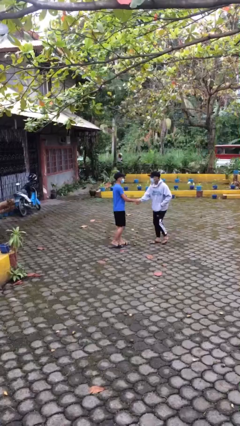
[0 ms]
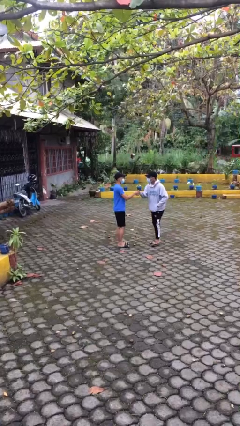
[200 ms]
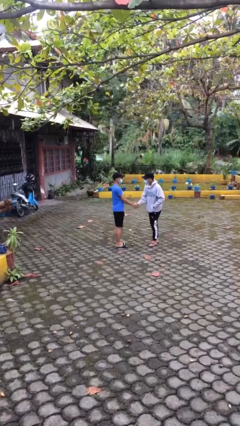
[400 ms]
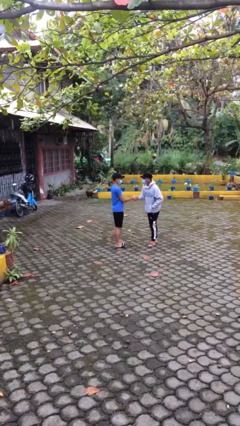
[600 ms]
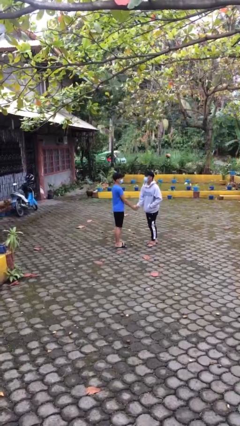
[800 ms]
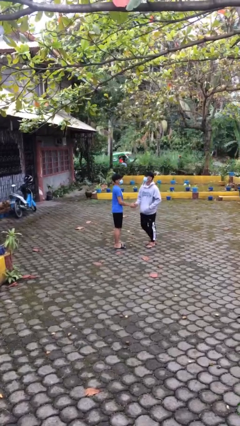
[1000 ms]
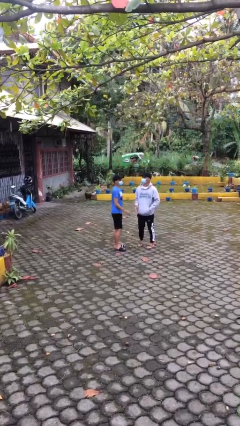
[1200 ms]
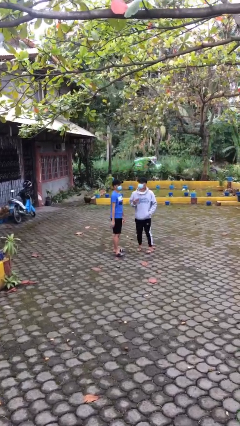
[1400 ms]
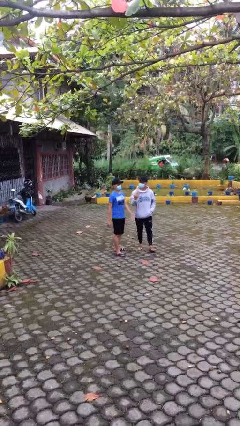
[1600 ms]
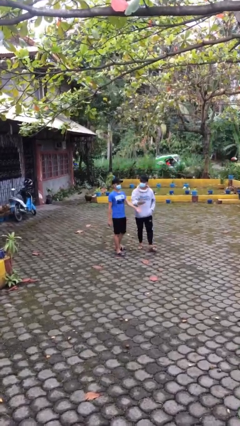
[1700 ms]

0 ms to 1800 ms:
person shakes hand

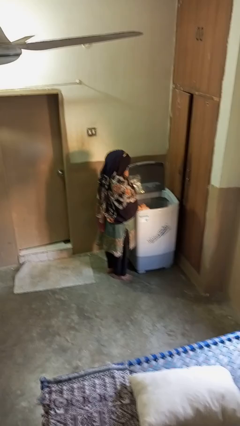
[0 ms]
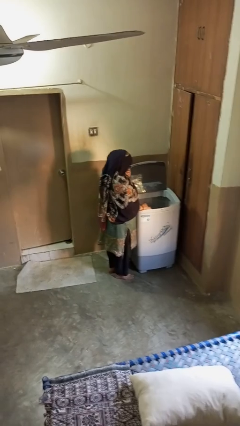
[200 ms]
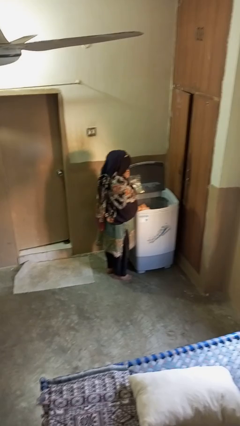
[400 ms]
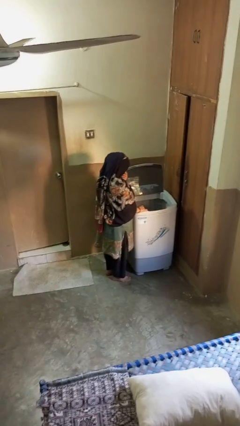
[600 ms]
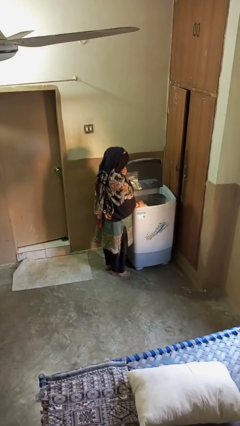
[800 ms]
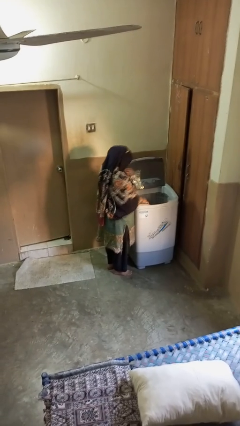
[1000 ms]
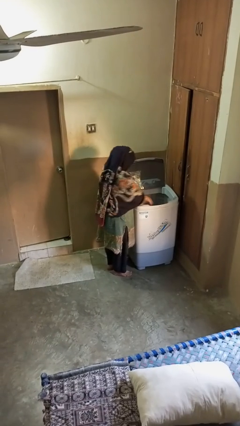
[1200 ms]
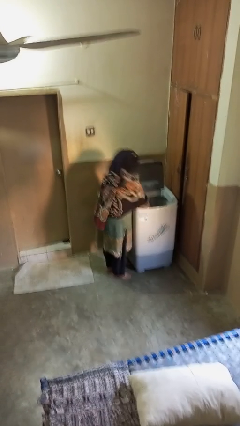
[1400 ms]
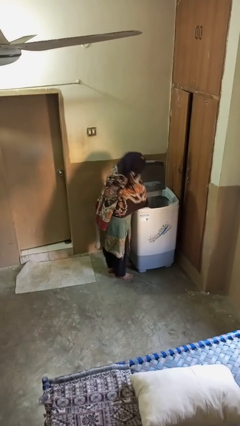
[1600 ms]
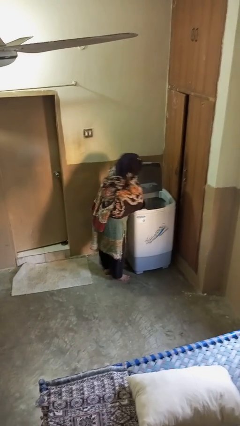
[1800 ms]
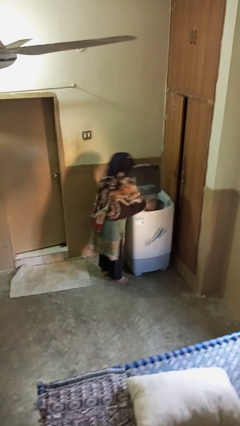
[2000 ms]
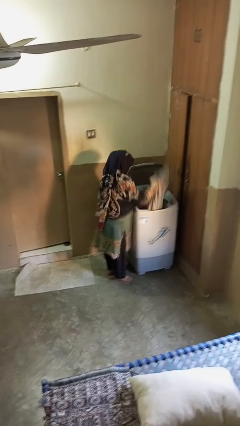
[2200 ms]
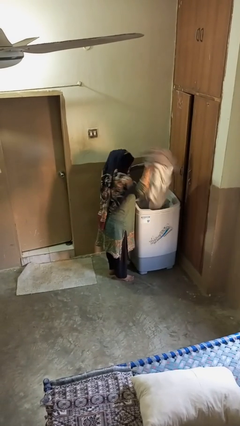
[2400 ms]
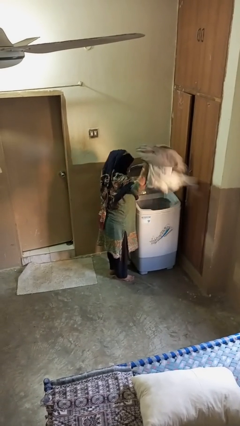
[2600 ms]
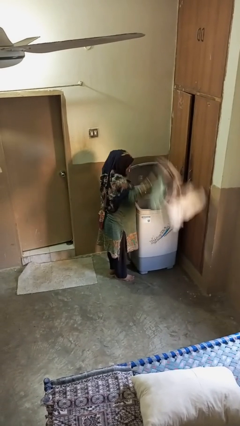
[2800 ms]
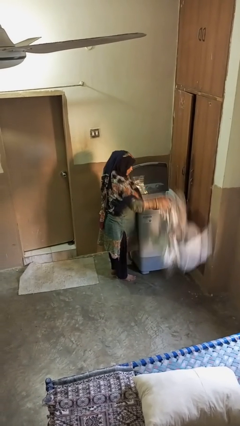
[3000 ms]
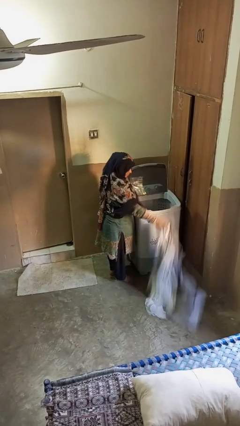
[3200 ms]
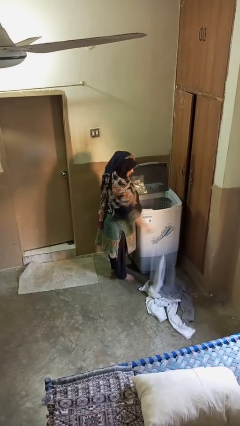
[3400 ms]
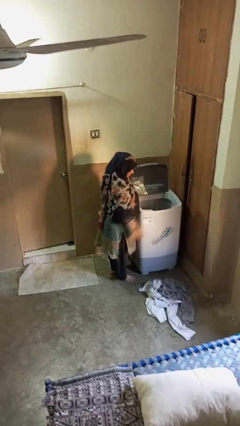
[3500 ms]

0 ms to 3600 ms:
person unloads clotheswasher

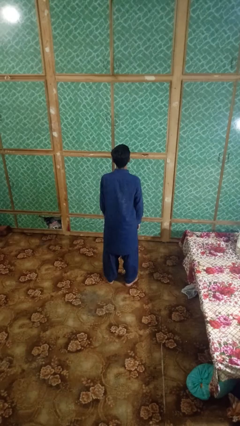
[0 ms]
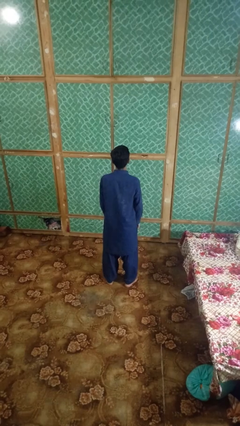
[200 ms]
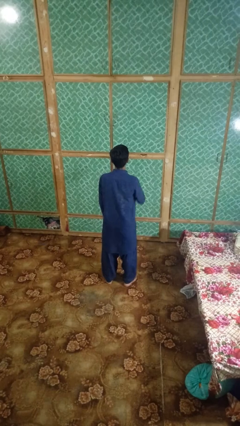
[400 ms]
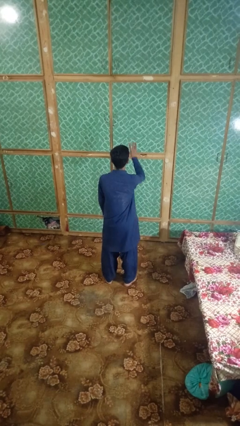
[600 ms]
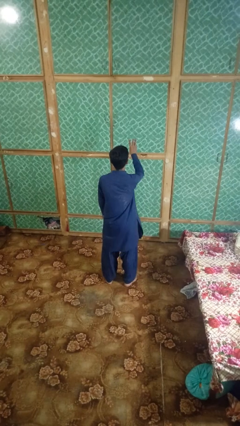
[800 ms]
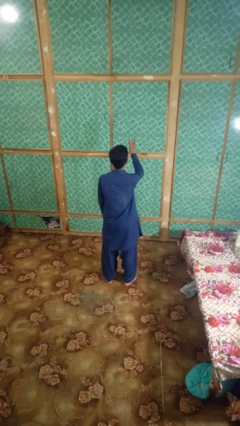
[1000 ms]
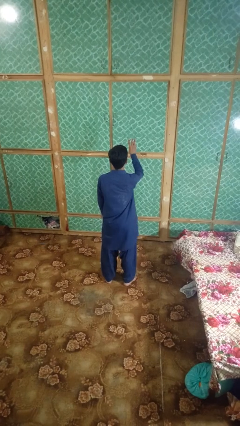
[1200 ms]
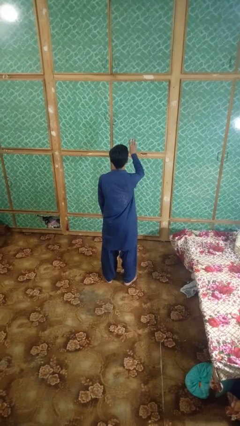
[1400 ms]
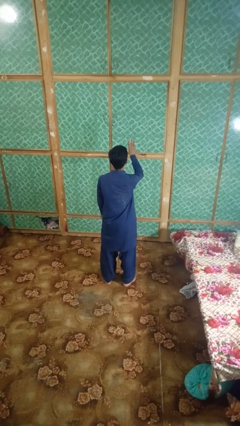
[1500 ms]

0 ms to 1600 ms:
person gestures number three

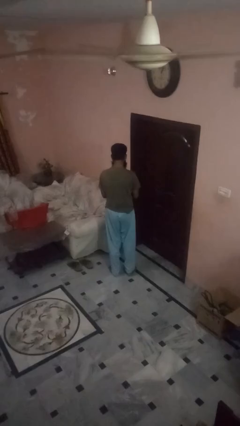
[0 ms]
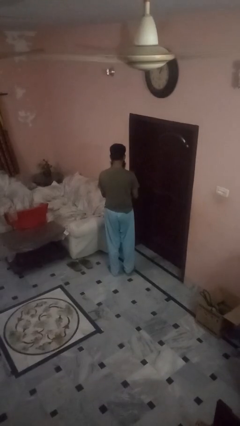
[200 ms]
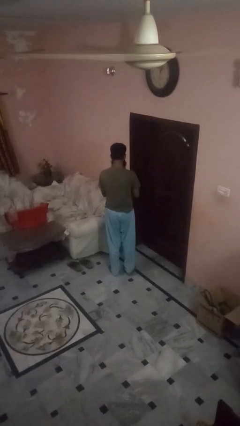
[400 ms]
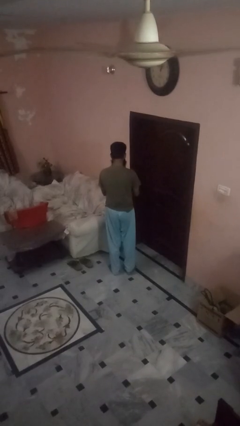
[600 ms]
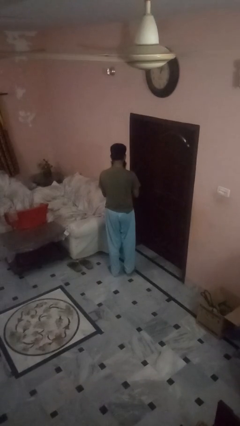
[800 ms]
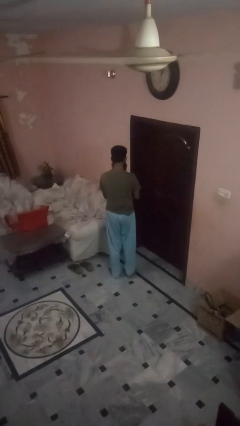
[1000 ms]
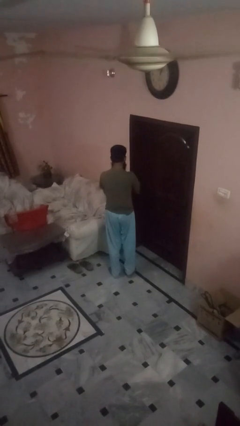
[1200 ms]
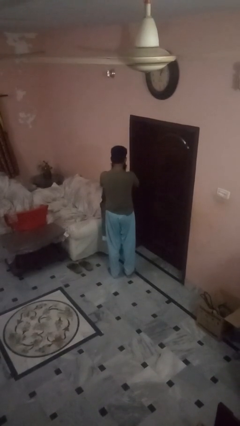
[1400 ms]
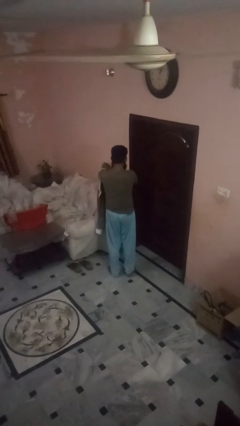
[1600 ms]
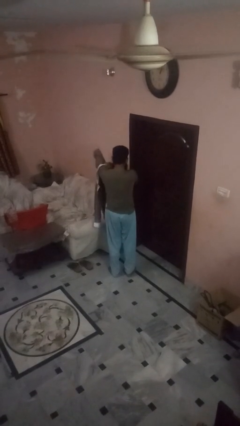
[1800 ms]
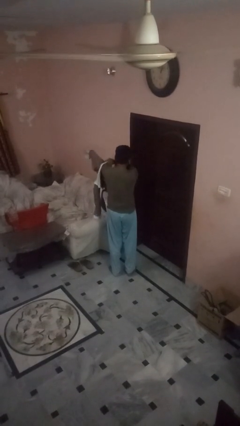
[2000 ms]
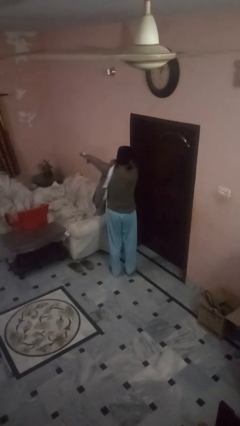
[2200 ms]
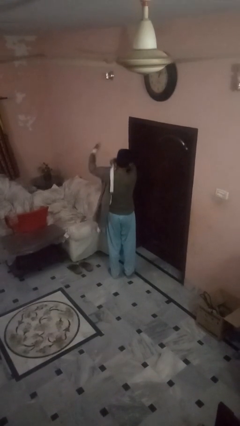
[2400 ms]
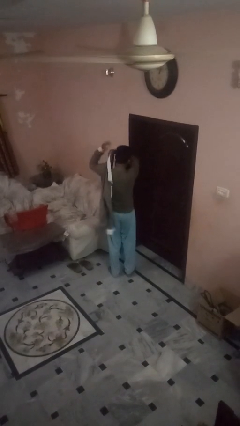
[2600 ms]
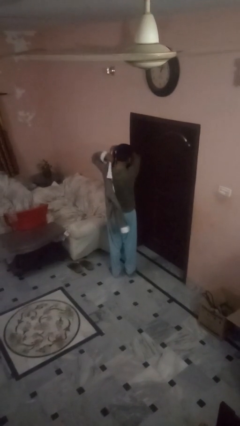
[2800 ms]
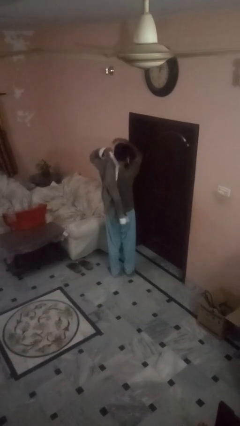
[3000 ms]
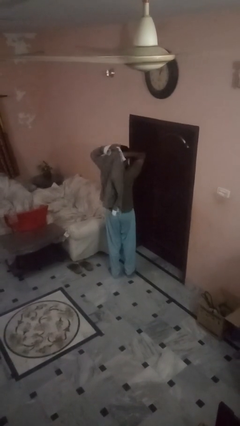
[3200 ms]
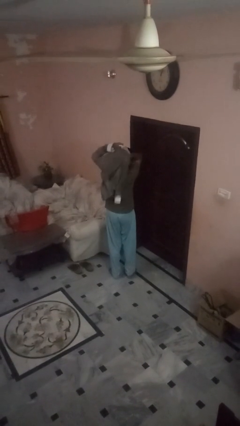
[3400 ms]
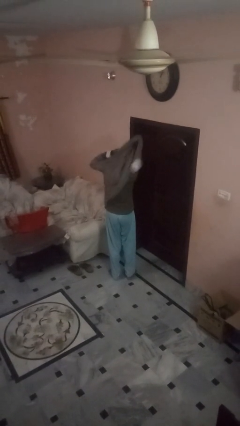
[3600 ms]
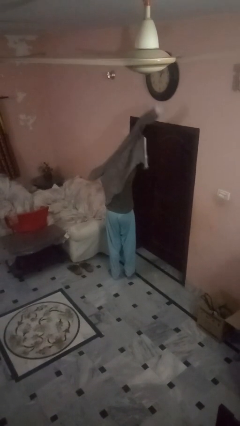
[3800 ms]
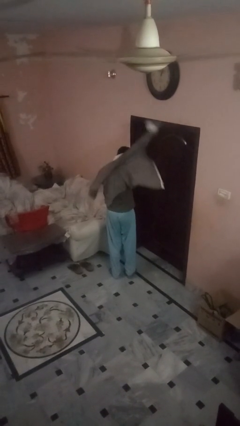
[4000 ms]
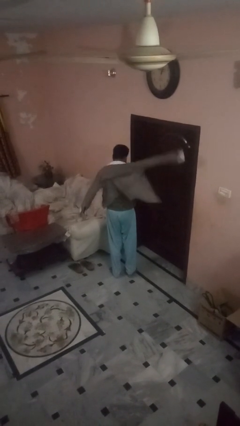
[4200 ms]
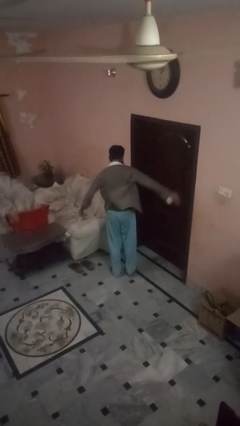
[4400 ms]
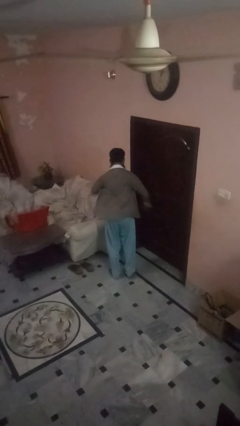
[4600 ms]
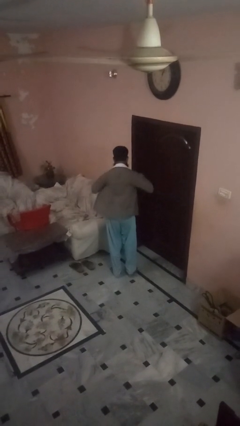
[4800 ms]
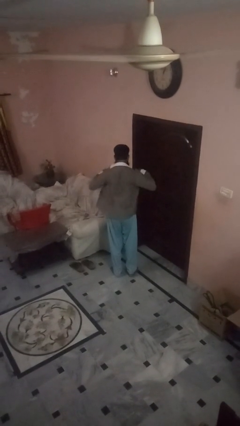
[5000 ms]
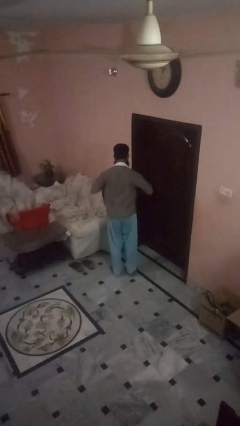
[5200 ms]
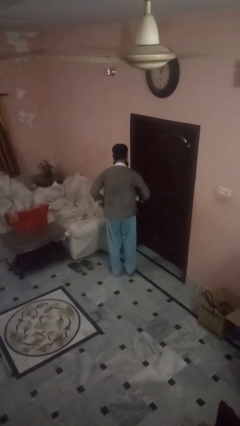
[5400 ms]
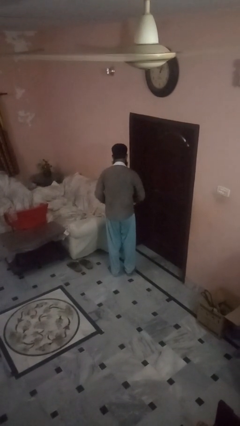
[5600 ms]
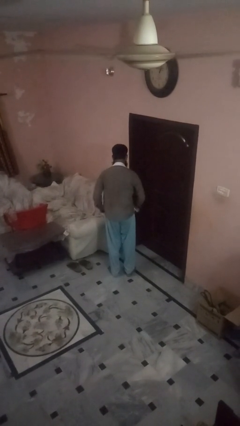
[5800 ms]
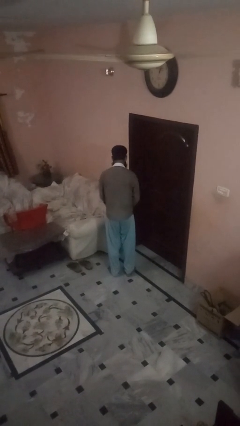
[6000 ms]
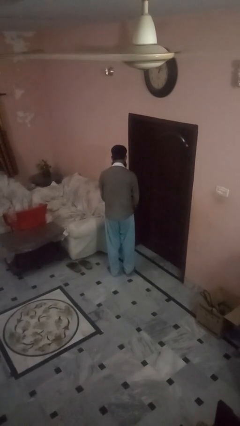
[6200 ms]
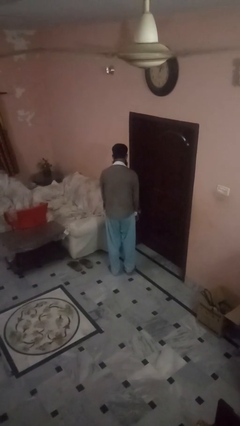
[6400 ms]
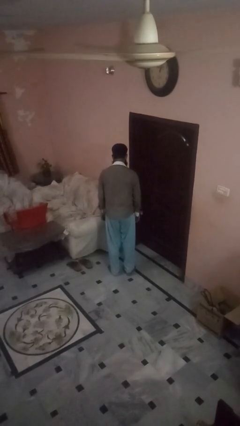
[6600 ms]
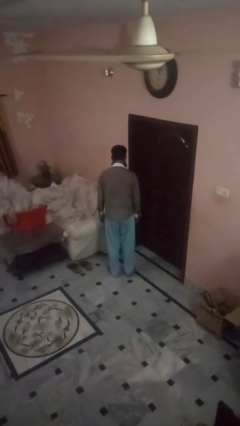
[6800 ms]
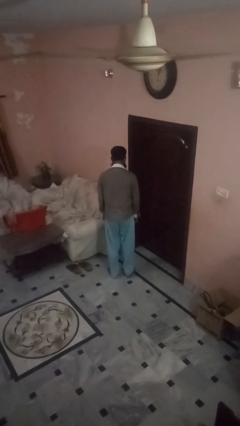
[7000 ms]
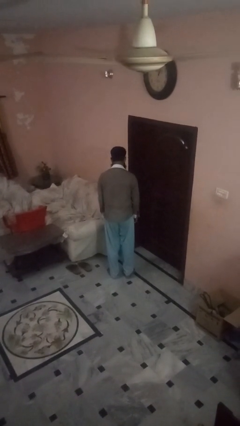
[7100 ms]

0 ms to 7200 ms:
person puts on shirt

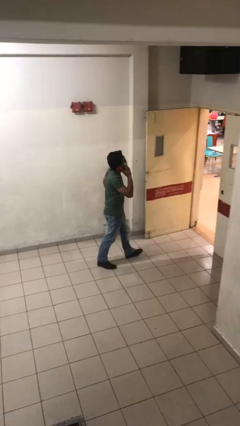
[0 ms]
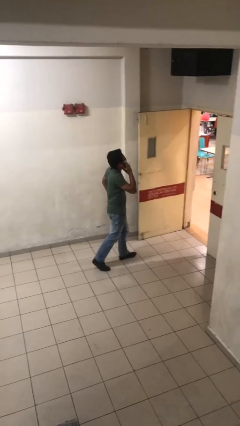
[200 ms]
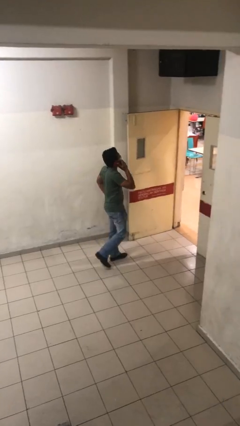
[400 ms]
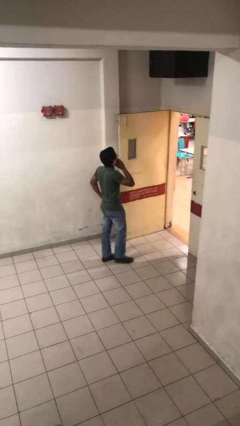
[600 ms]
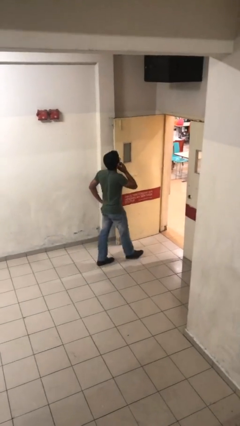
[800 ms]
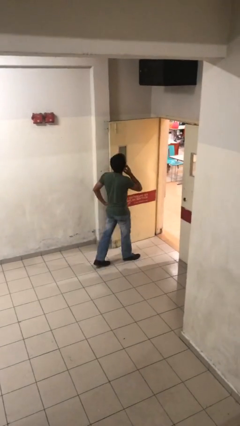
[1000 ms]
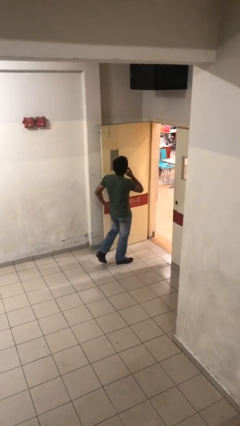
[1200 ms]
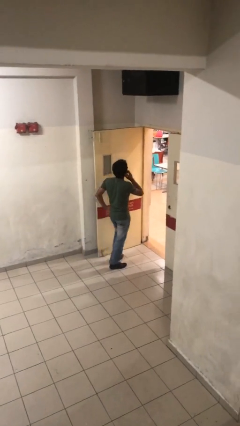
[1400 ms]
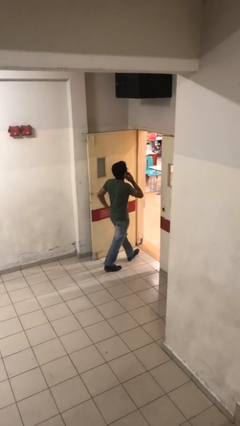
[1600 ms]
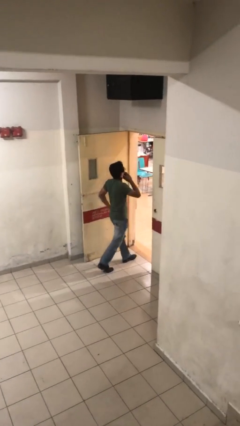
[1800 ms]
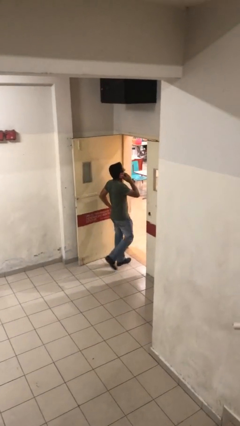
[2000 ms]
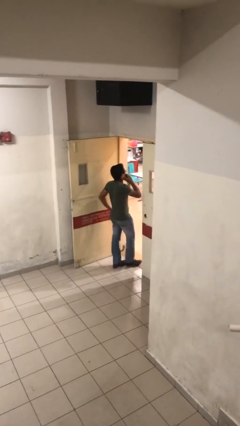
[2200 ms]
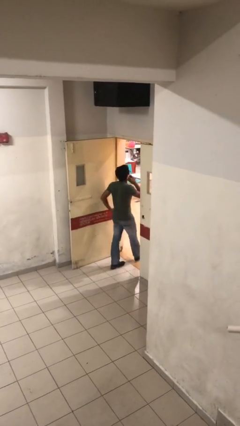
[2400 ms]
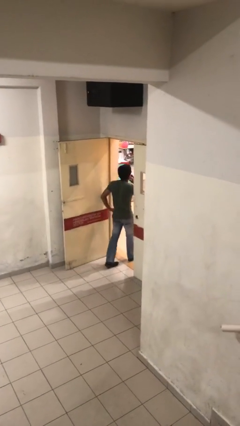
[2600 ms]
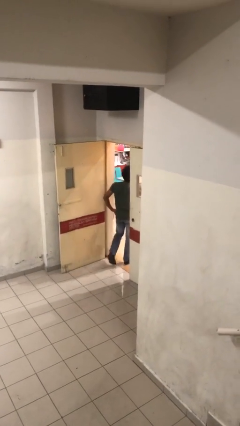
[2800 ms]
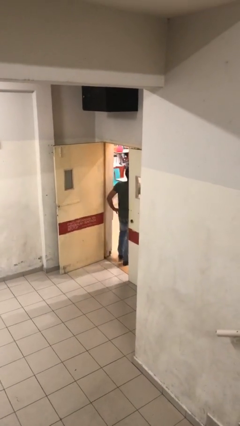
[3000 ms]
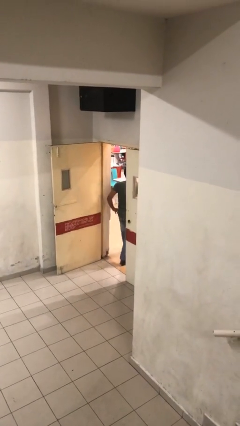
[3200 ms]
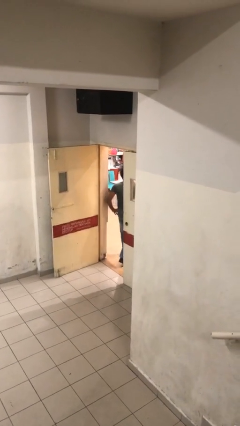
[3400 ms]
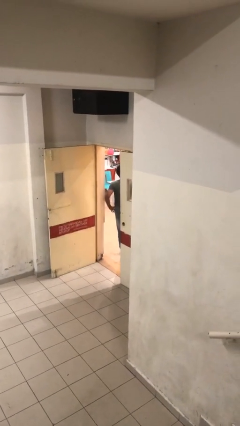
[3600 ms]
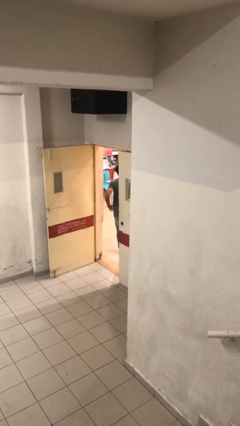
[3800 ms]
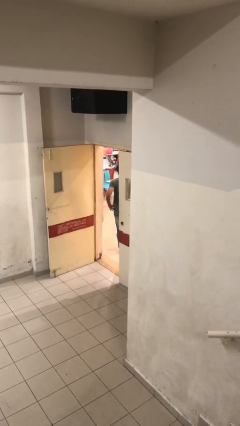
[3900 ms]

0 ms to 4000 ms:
person exits scene through structure
